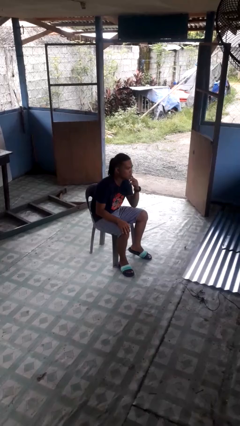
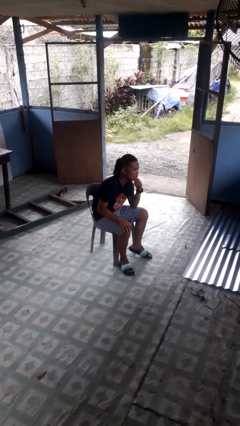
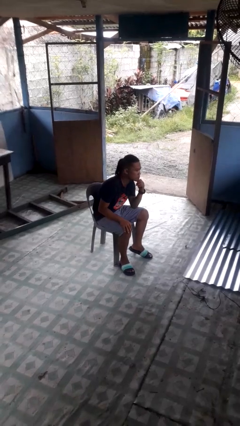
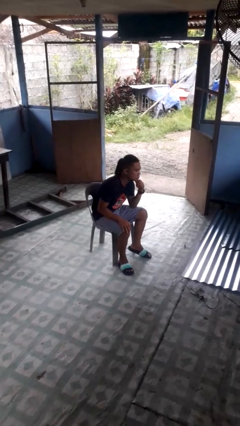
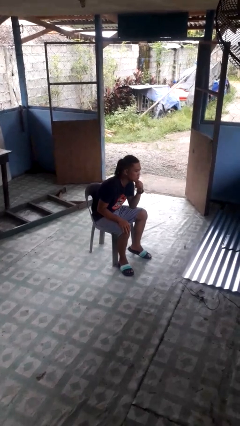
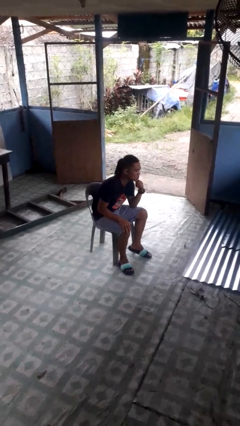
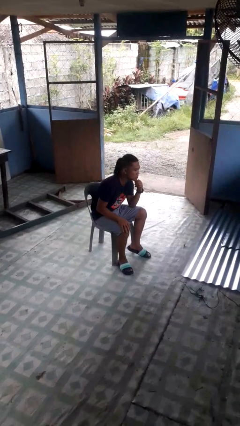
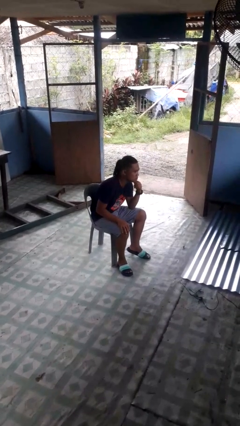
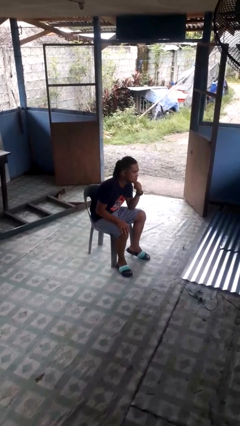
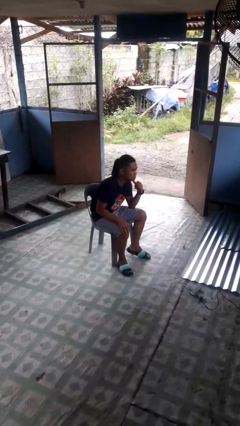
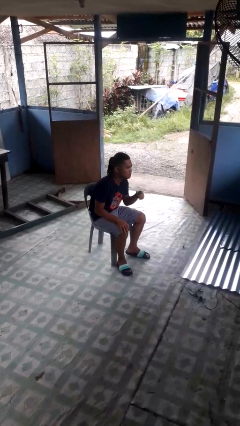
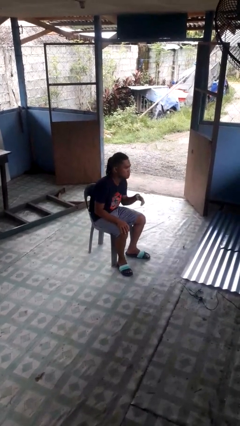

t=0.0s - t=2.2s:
person strokes chin

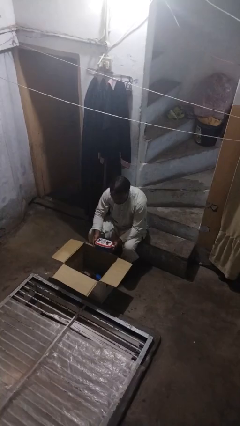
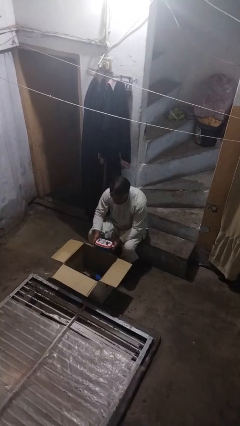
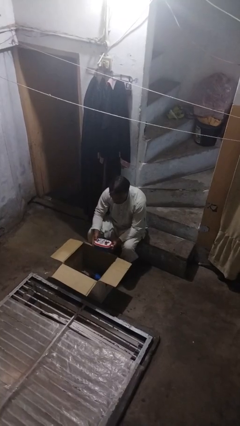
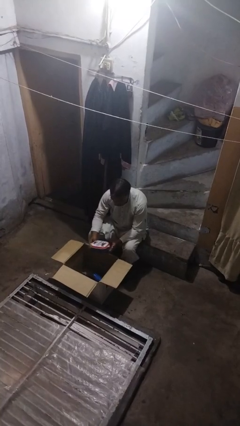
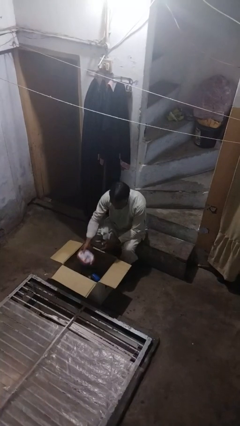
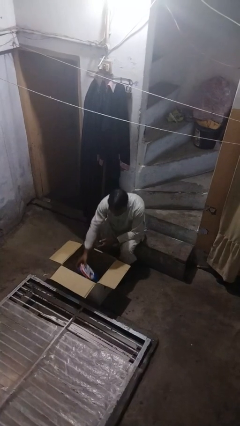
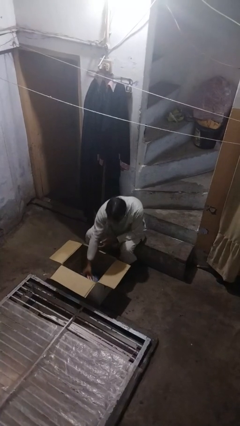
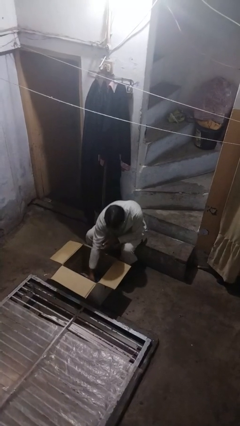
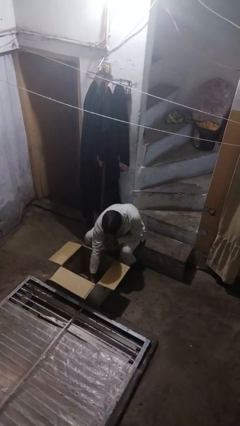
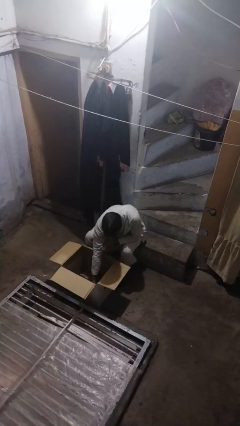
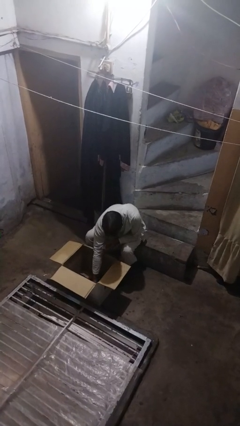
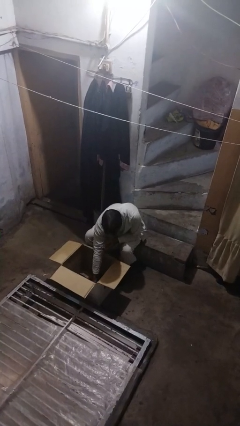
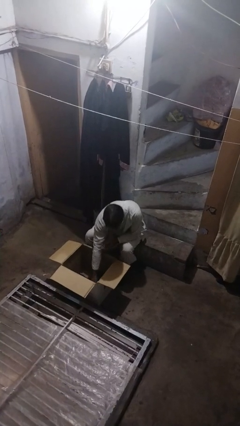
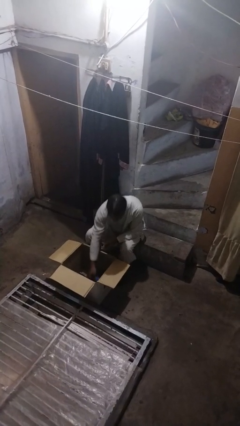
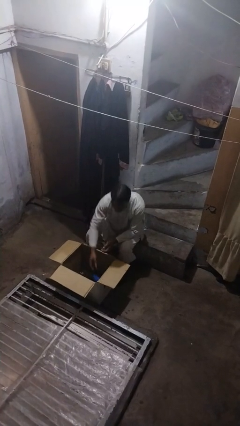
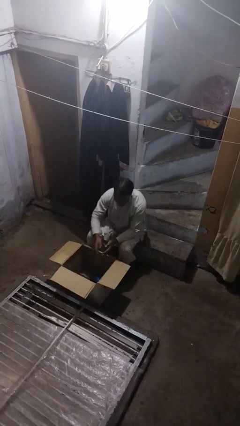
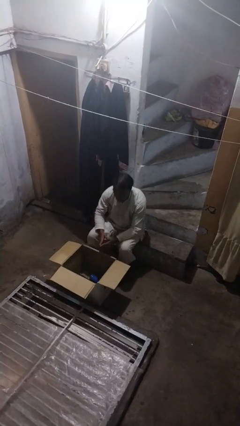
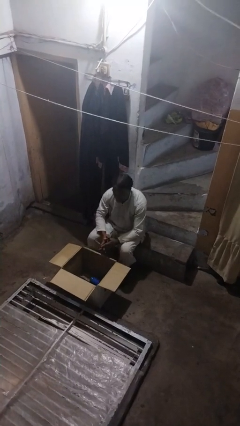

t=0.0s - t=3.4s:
person puts object into box

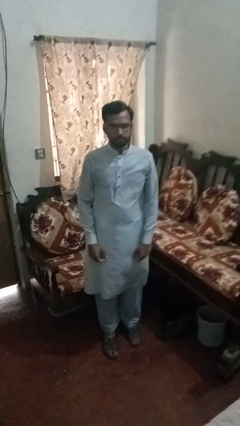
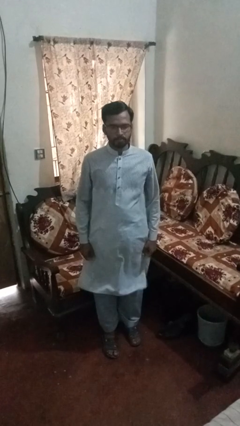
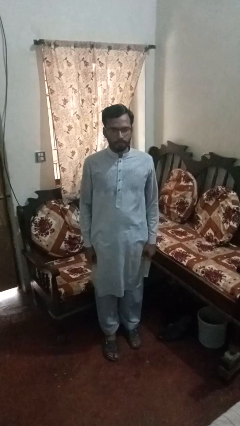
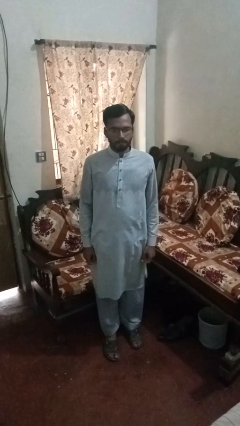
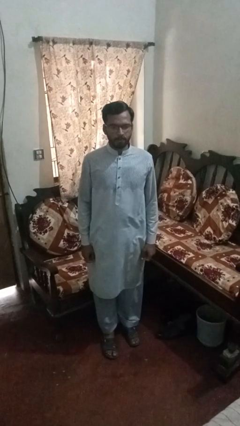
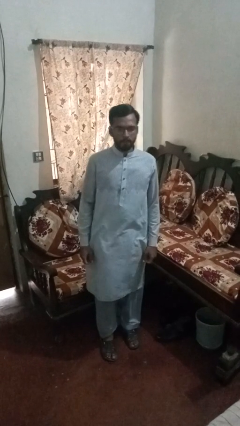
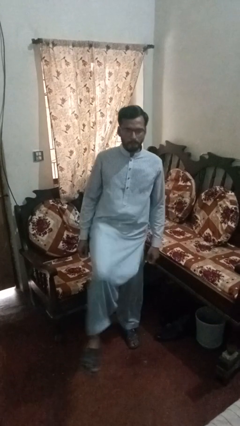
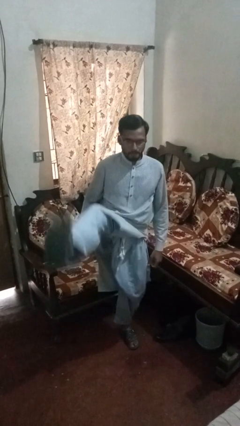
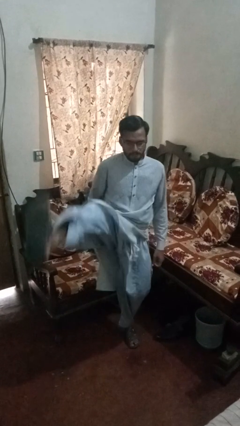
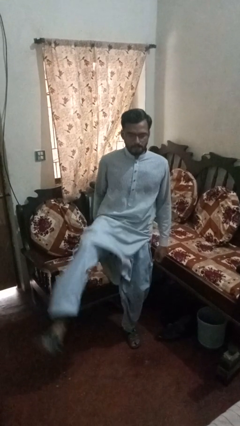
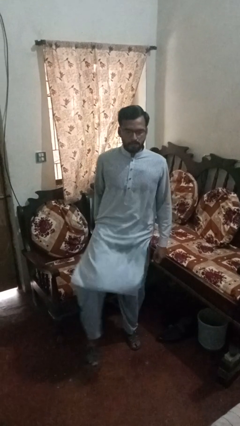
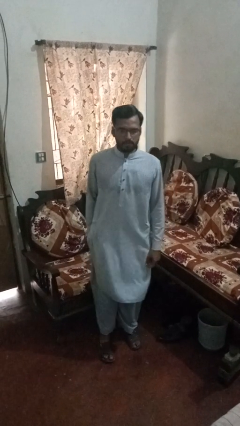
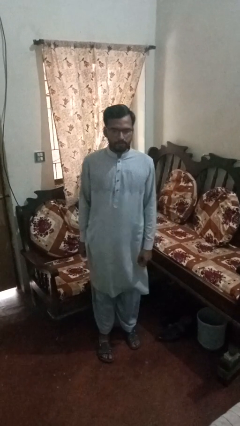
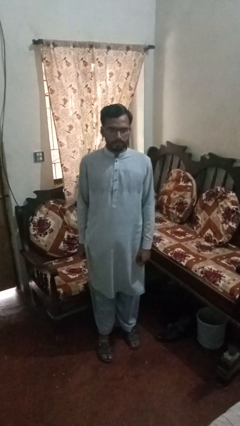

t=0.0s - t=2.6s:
person karate kicks

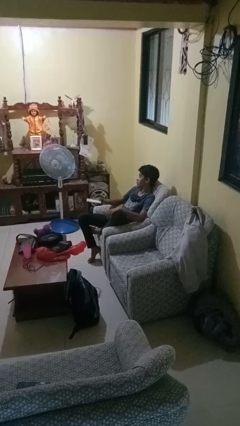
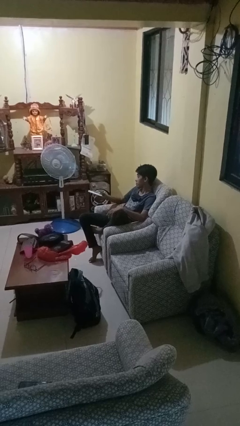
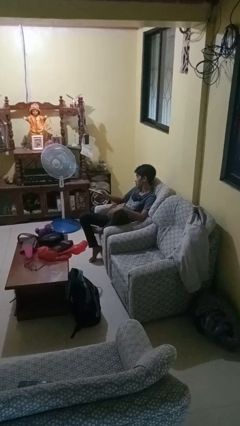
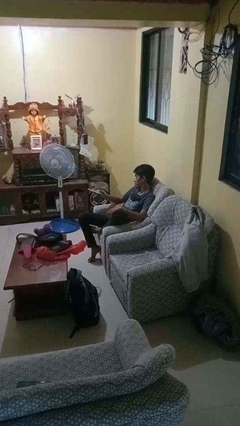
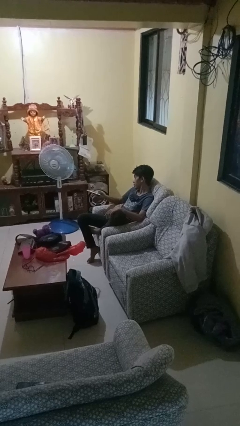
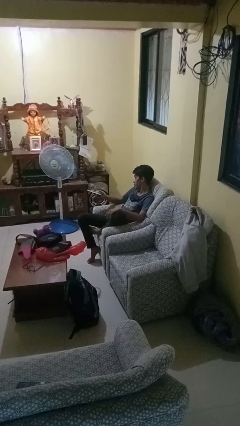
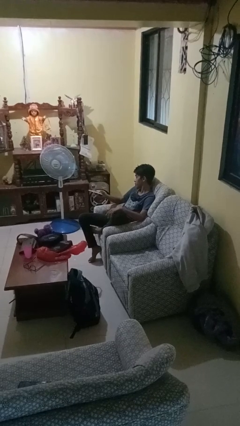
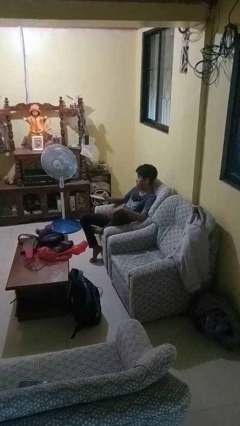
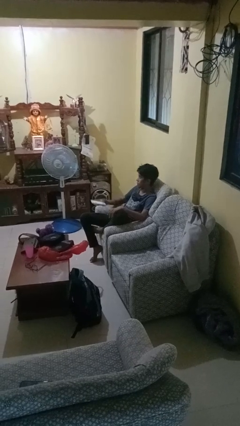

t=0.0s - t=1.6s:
person uses television remote

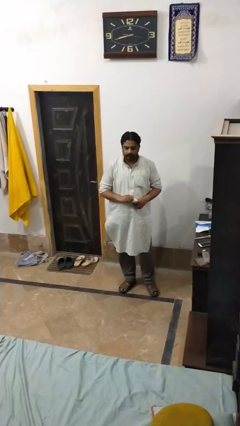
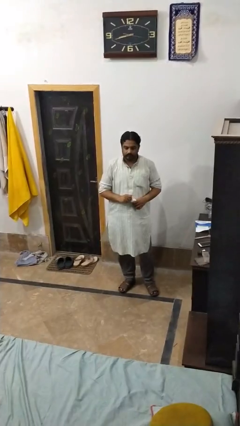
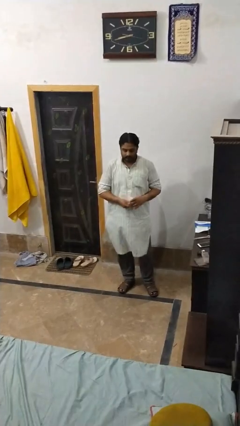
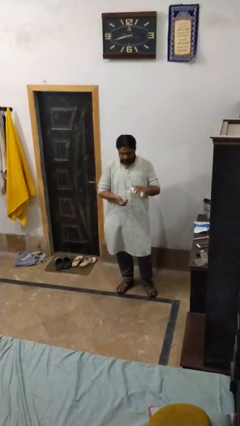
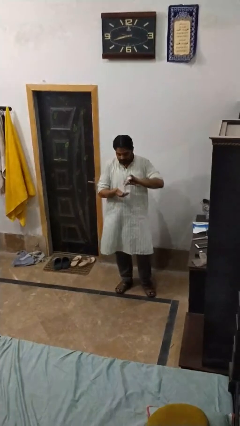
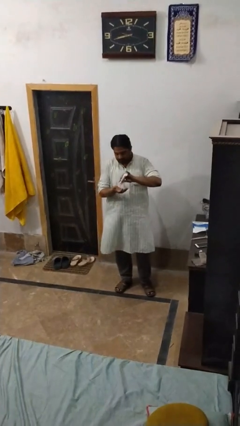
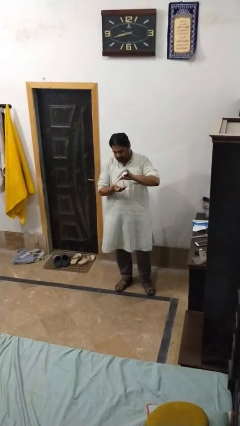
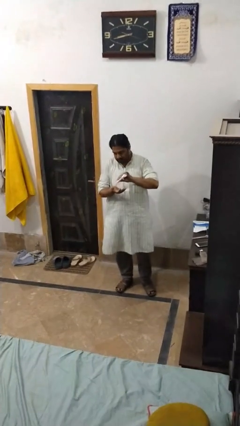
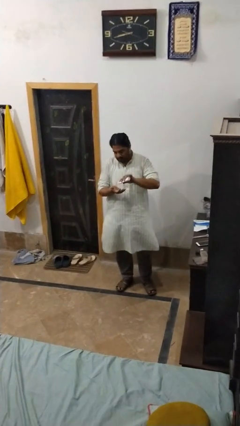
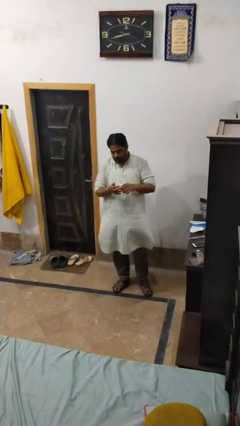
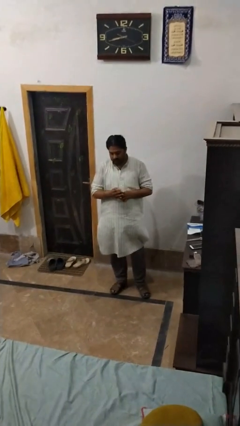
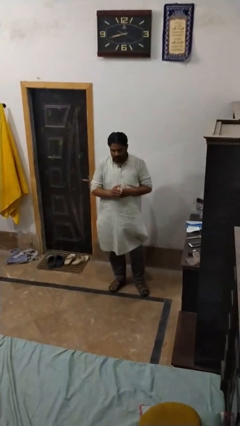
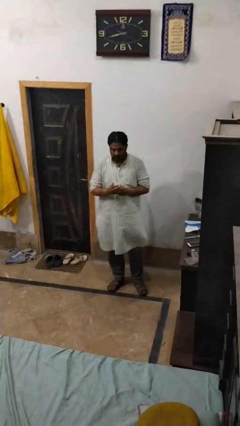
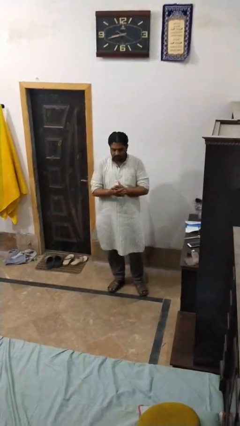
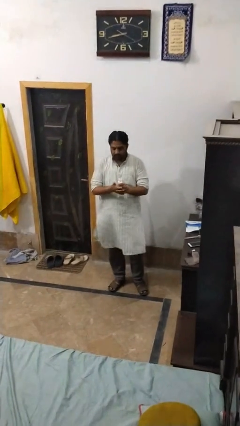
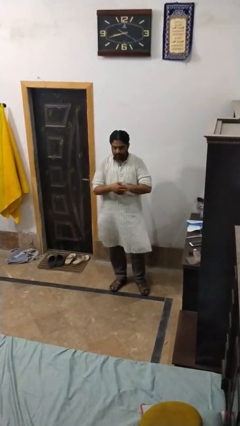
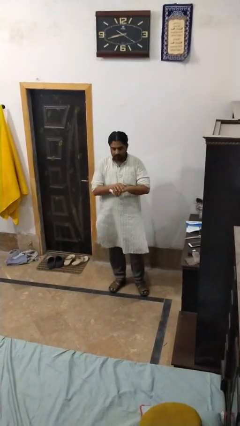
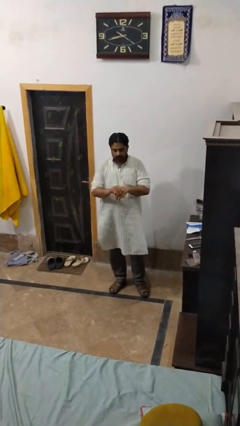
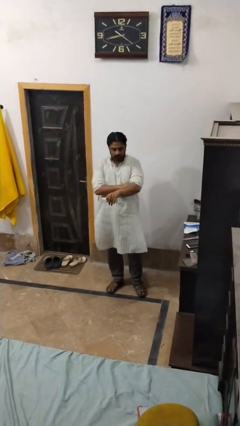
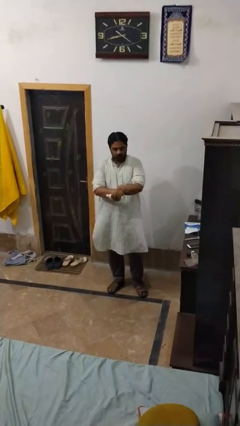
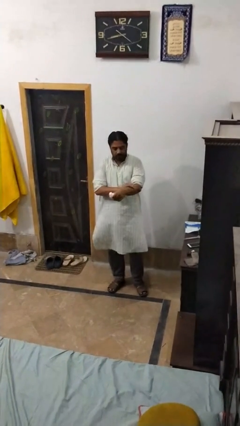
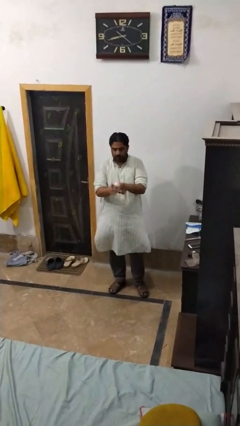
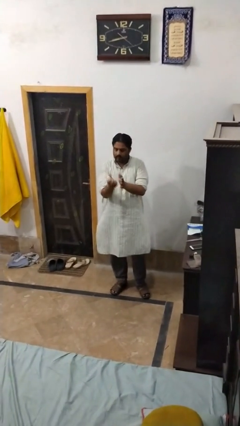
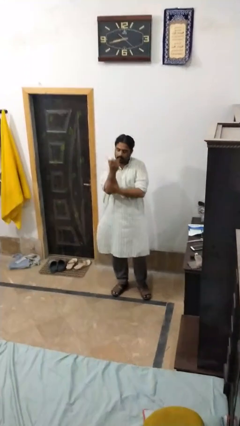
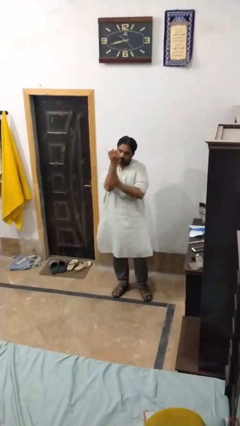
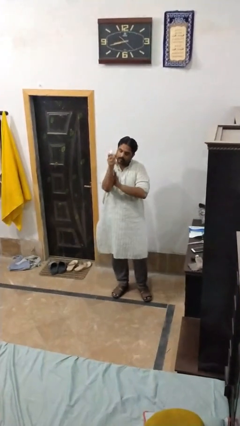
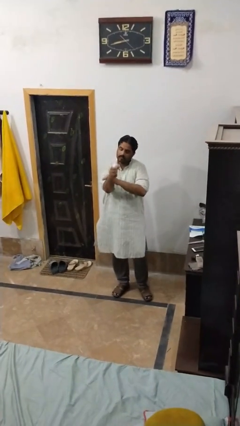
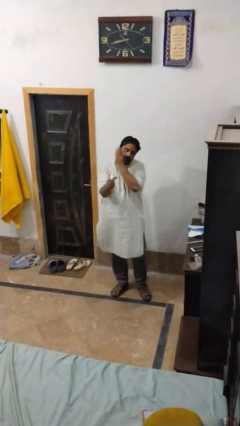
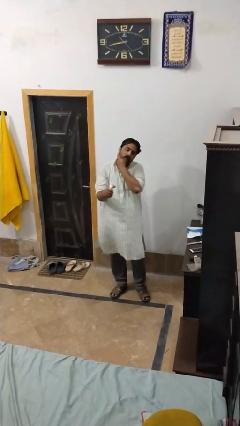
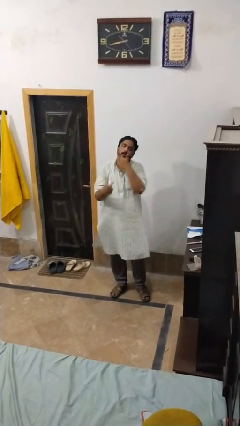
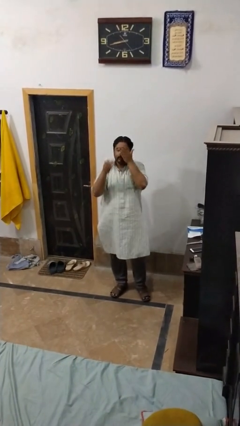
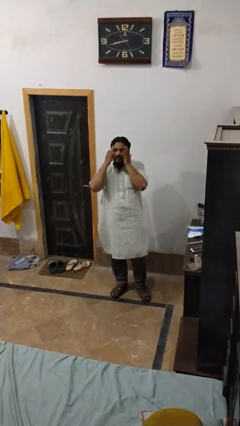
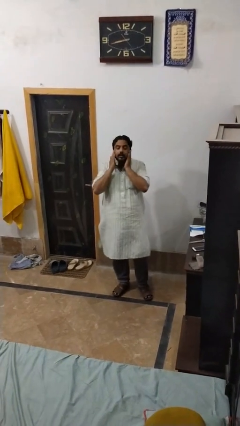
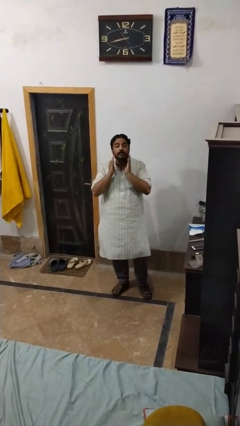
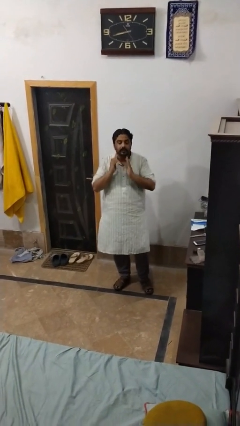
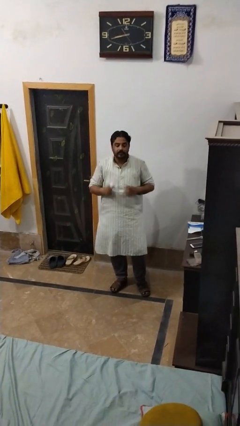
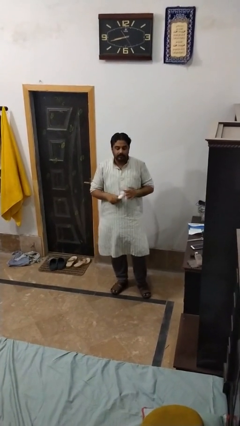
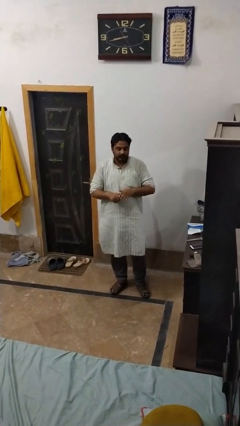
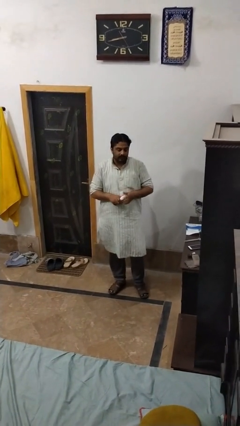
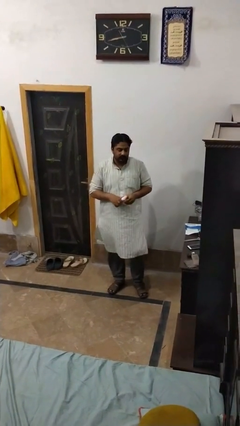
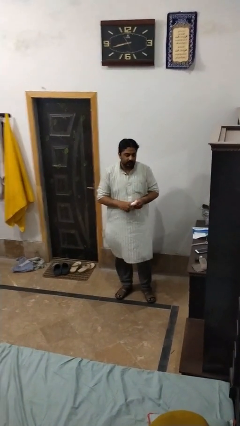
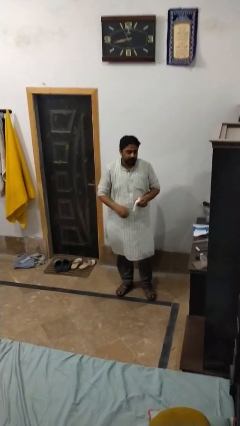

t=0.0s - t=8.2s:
person applies sunscreen
